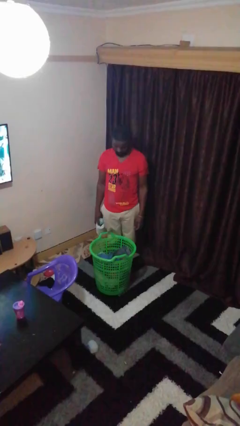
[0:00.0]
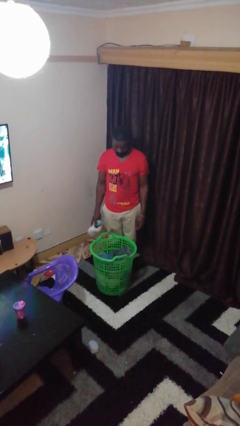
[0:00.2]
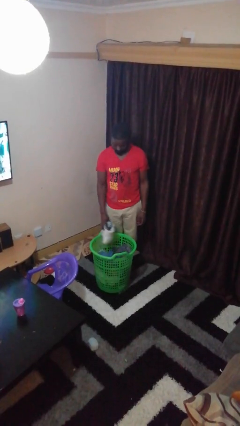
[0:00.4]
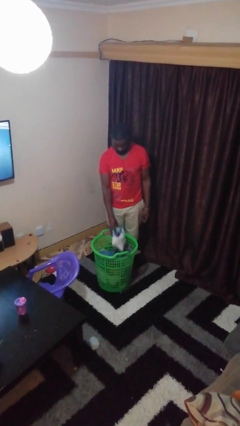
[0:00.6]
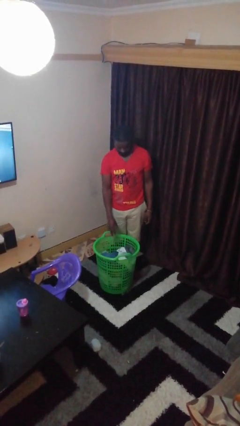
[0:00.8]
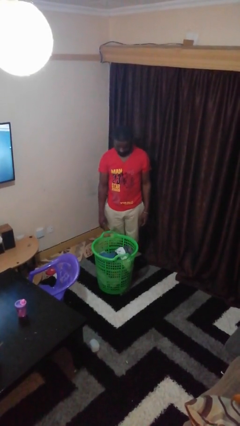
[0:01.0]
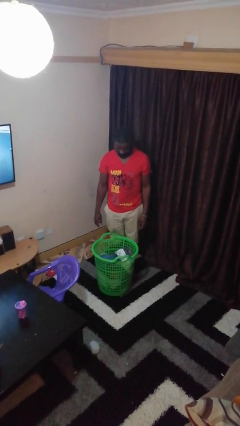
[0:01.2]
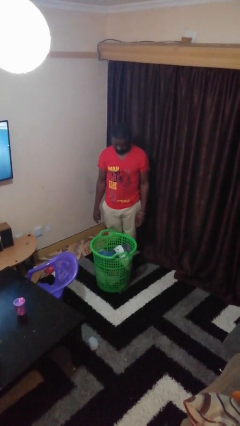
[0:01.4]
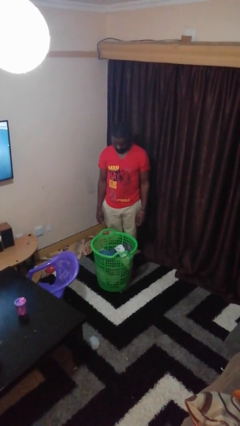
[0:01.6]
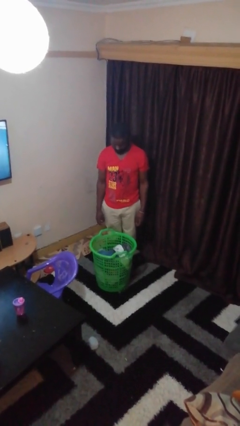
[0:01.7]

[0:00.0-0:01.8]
person puts object into basket

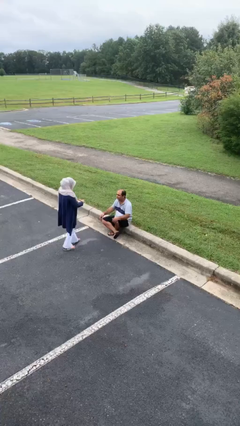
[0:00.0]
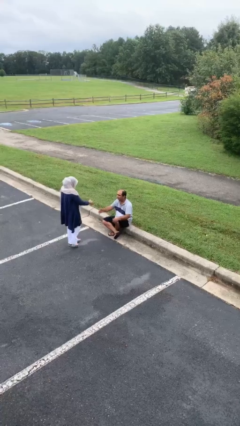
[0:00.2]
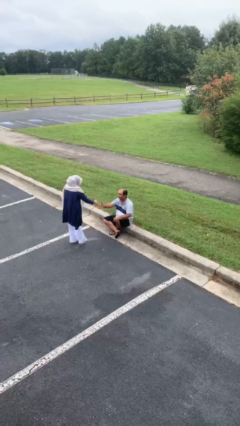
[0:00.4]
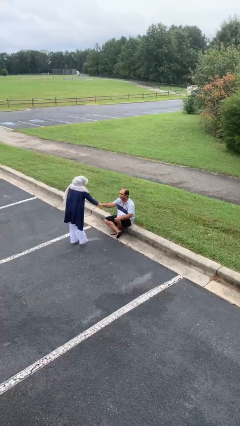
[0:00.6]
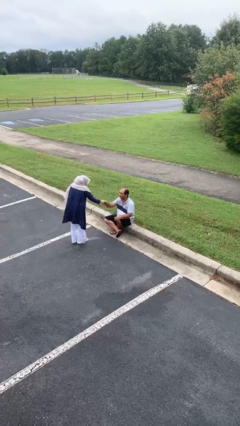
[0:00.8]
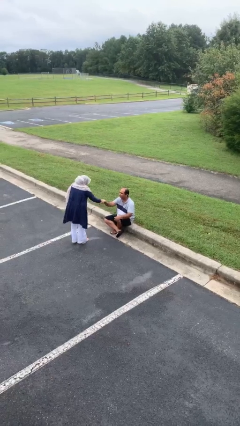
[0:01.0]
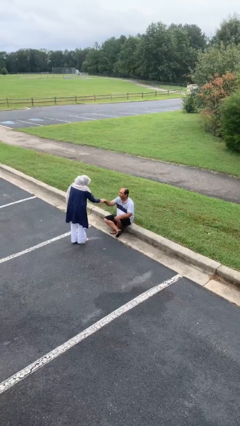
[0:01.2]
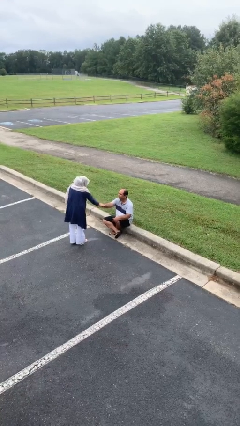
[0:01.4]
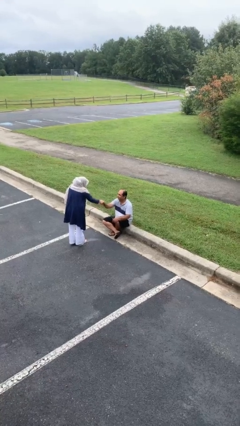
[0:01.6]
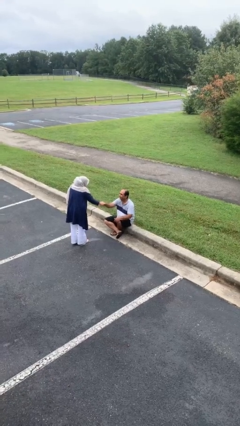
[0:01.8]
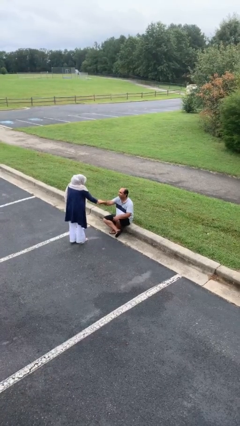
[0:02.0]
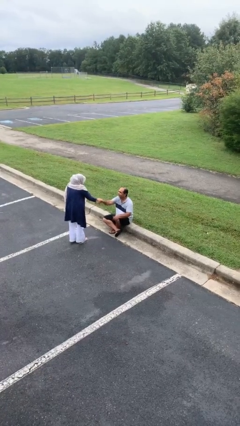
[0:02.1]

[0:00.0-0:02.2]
person shakes hand

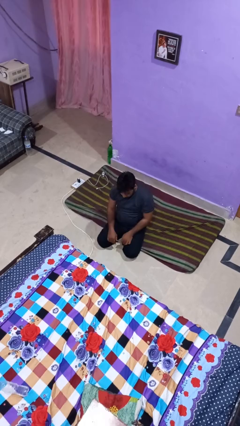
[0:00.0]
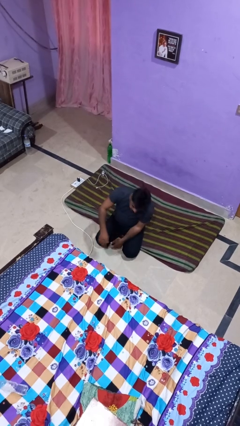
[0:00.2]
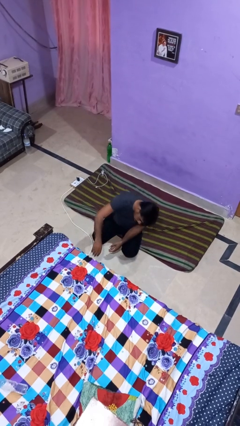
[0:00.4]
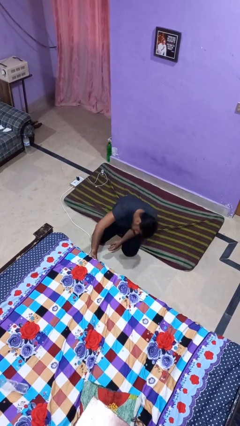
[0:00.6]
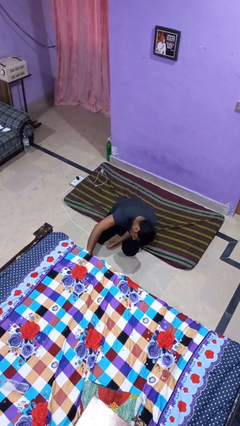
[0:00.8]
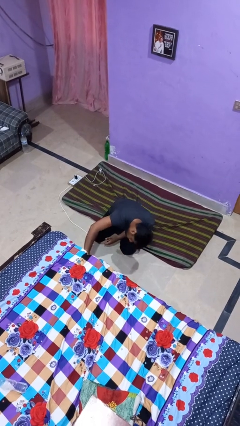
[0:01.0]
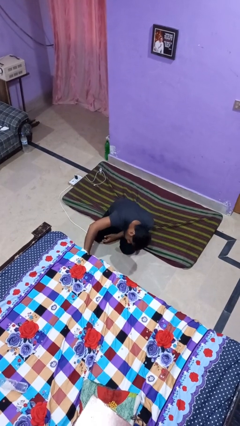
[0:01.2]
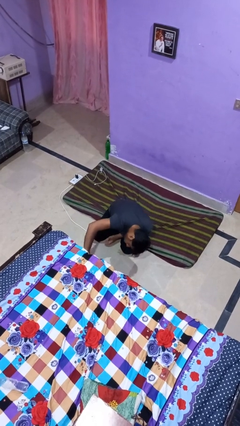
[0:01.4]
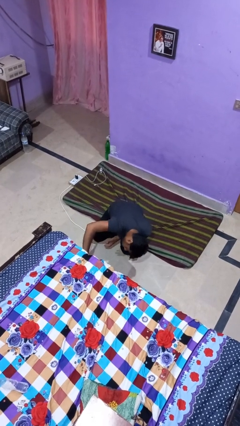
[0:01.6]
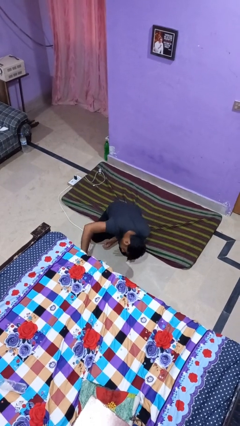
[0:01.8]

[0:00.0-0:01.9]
person searches under bed

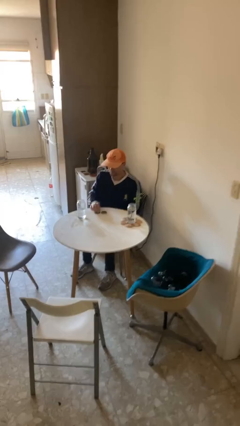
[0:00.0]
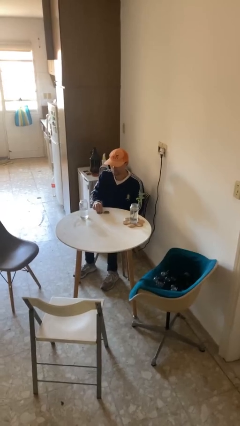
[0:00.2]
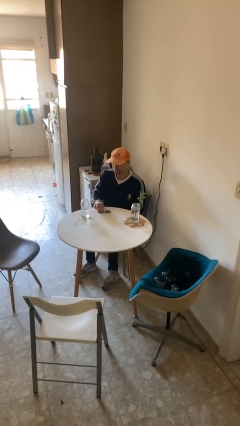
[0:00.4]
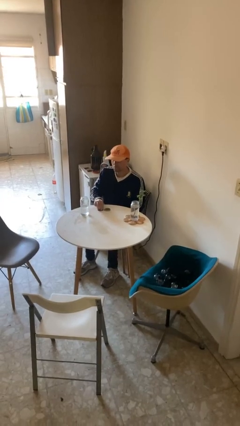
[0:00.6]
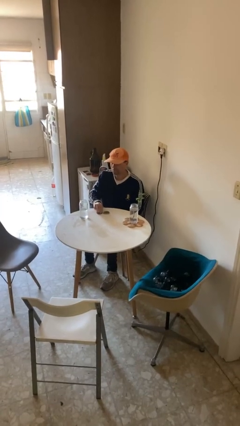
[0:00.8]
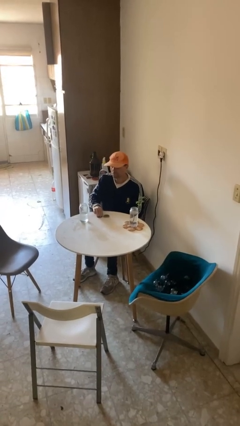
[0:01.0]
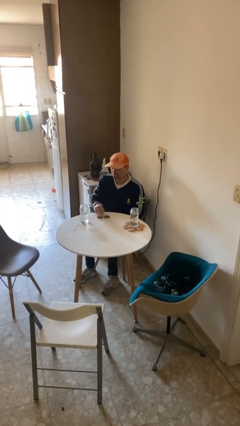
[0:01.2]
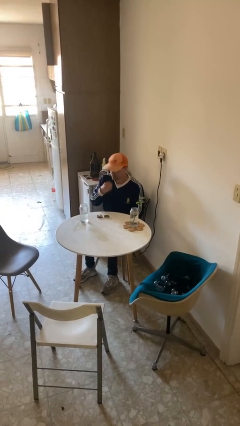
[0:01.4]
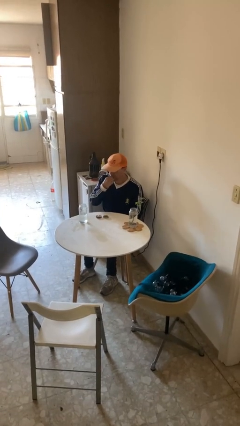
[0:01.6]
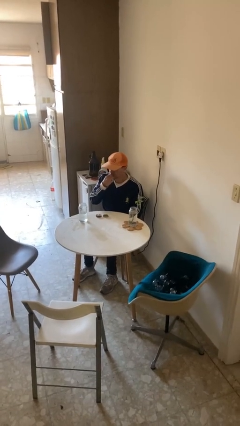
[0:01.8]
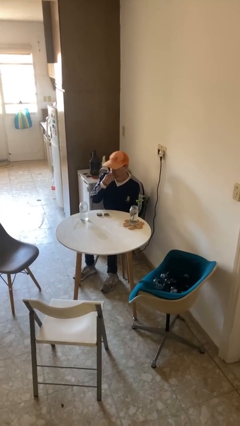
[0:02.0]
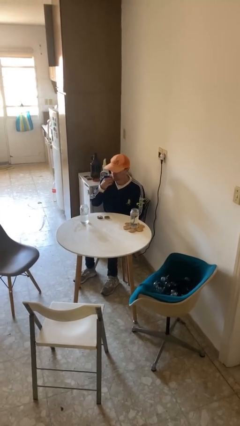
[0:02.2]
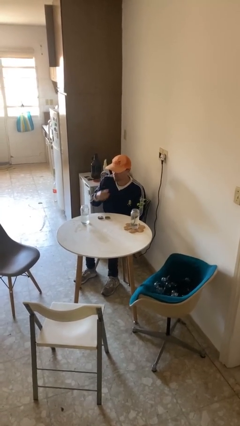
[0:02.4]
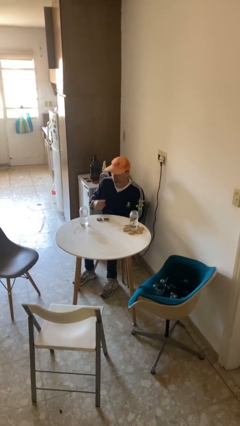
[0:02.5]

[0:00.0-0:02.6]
person takes medicine pills

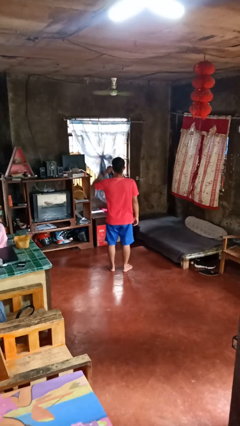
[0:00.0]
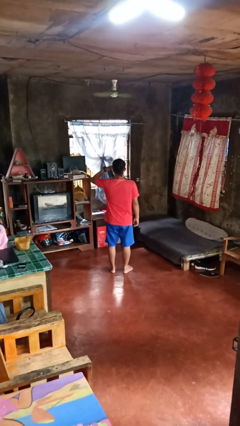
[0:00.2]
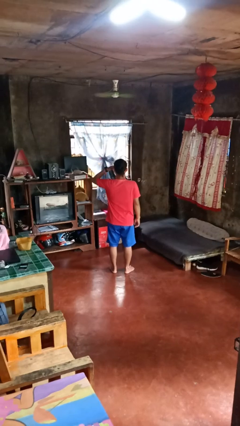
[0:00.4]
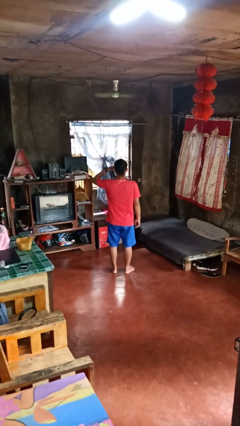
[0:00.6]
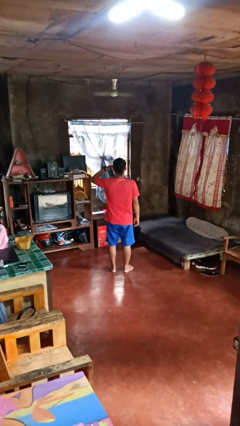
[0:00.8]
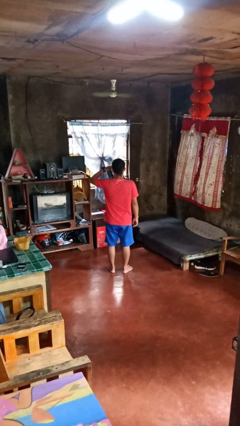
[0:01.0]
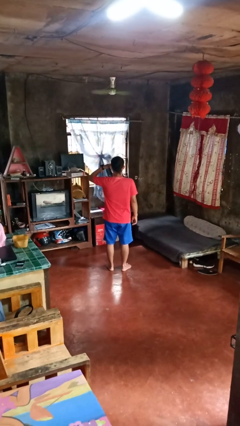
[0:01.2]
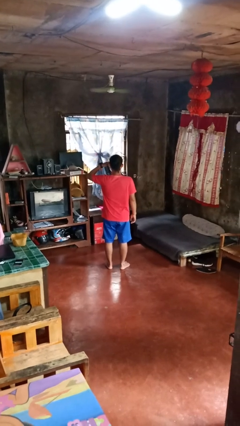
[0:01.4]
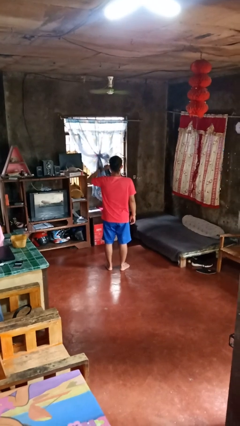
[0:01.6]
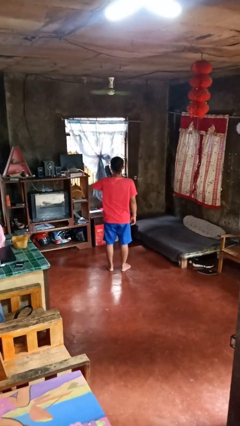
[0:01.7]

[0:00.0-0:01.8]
person salutes

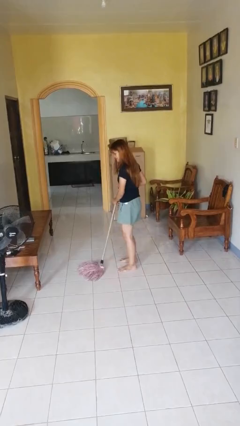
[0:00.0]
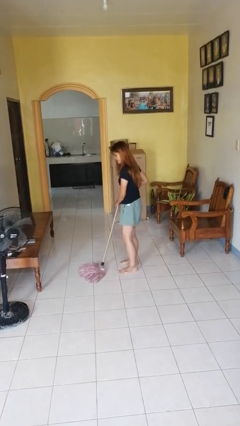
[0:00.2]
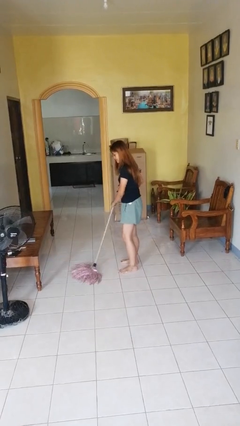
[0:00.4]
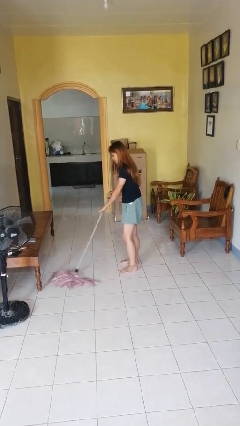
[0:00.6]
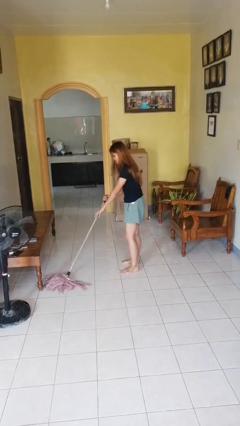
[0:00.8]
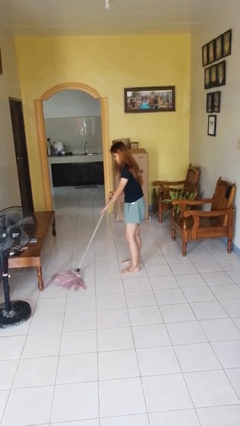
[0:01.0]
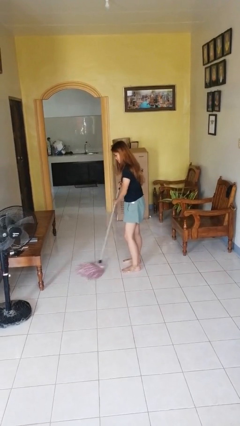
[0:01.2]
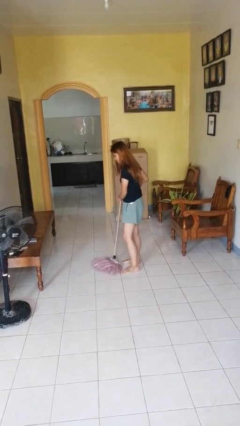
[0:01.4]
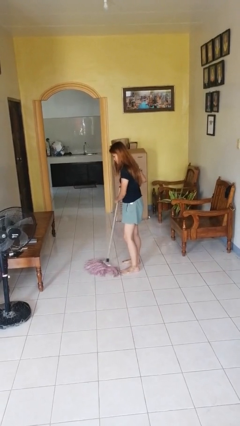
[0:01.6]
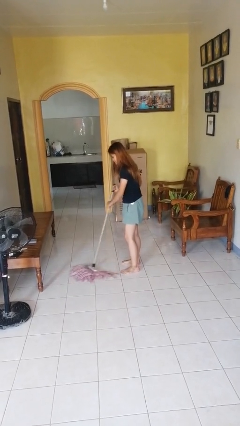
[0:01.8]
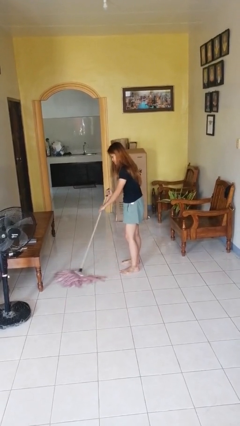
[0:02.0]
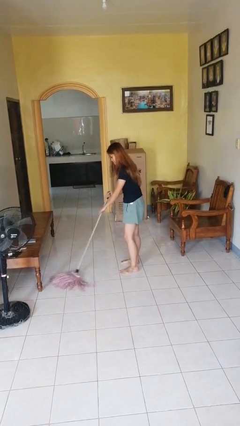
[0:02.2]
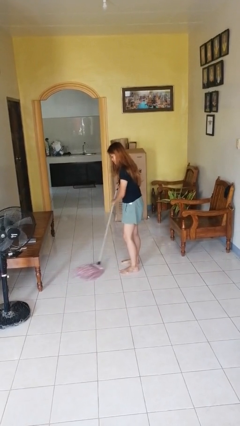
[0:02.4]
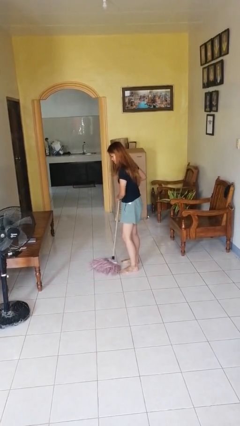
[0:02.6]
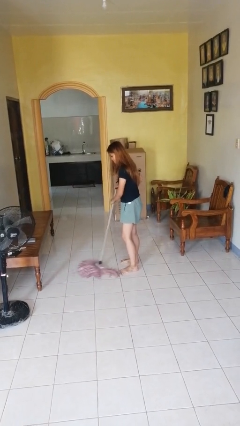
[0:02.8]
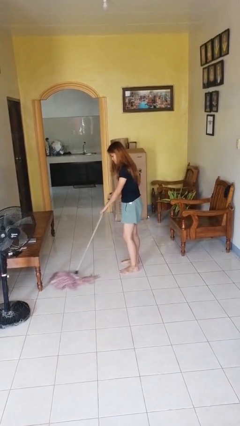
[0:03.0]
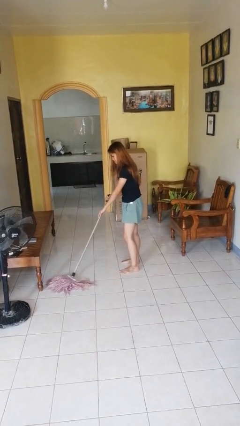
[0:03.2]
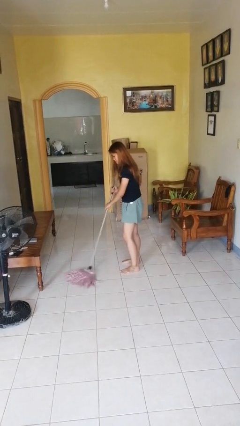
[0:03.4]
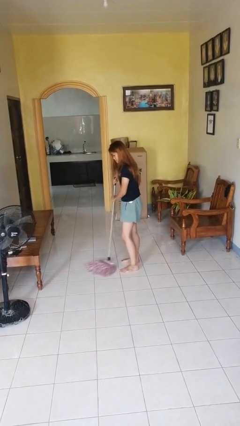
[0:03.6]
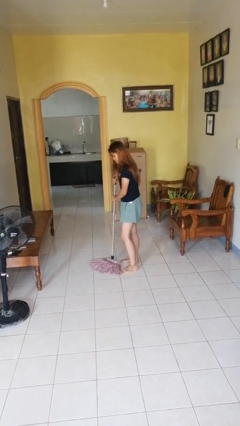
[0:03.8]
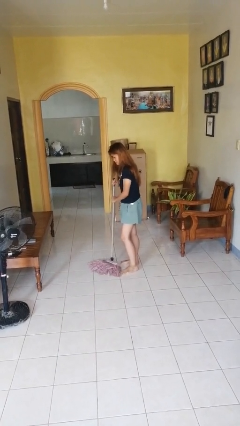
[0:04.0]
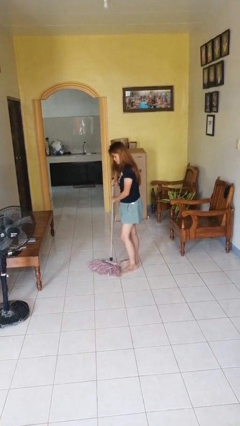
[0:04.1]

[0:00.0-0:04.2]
person mops

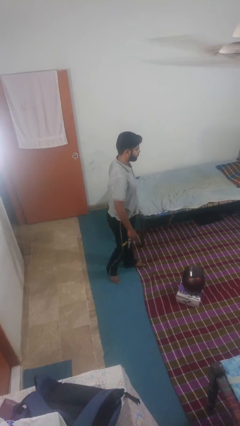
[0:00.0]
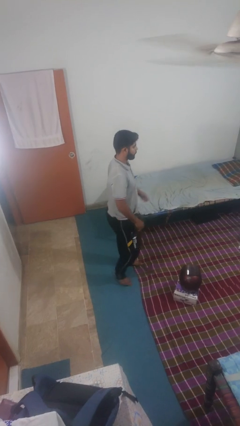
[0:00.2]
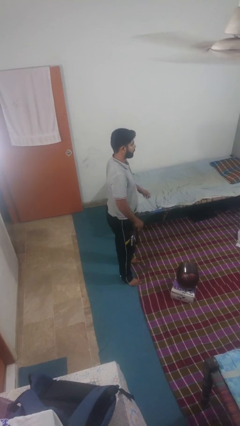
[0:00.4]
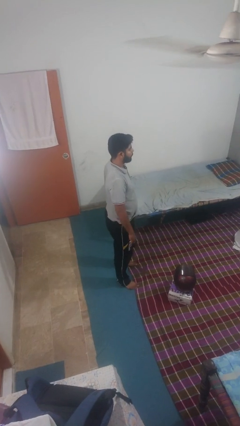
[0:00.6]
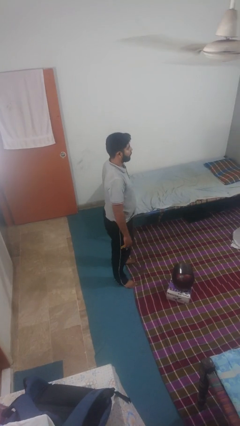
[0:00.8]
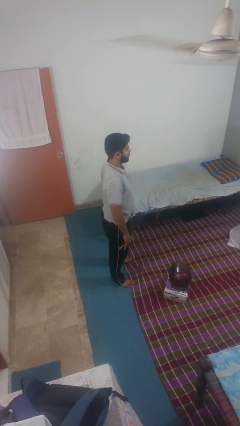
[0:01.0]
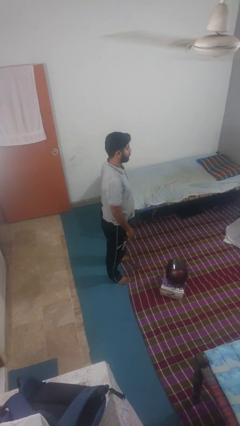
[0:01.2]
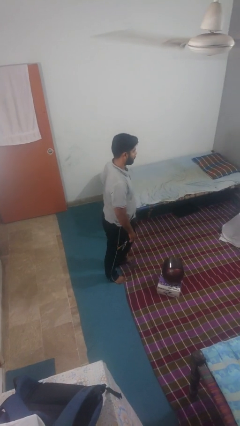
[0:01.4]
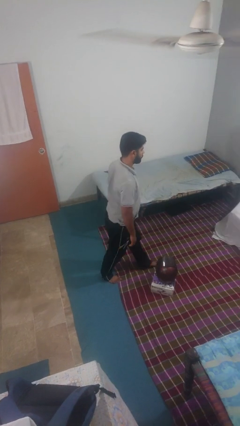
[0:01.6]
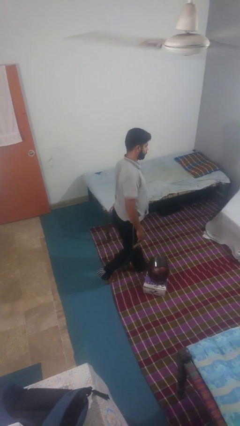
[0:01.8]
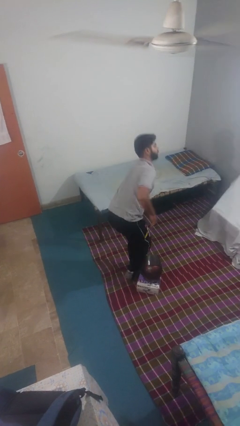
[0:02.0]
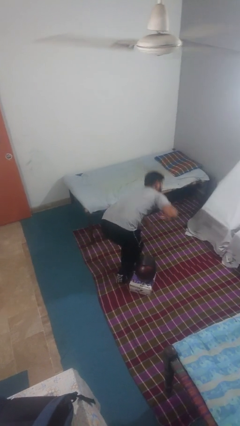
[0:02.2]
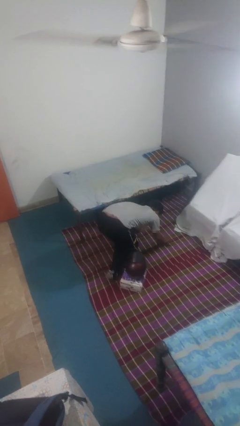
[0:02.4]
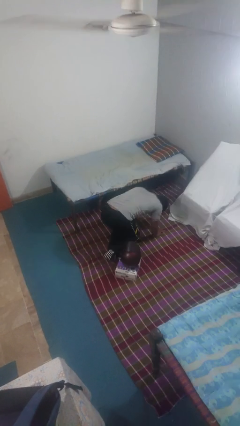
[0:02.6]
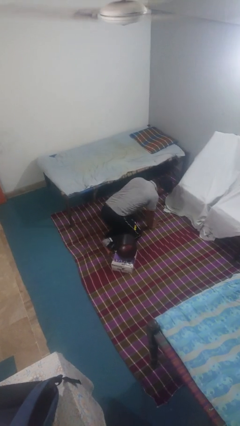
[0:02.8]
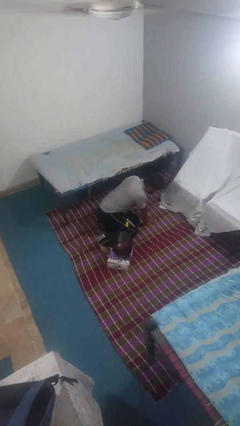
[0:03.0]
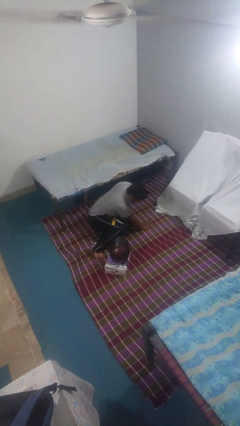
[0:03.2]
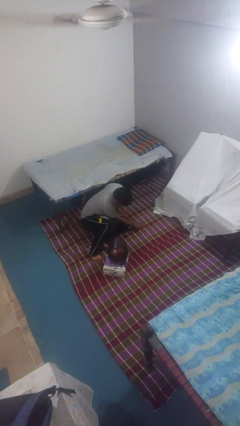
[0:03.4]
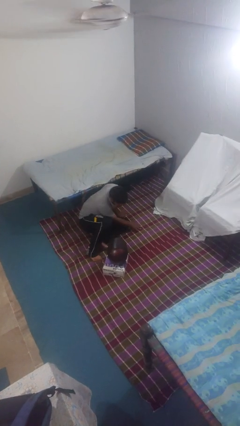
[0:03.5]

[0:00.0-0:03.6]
person trips on object on floor
